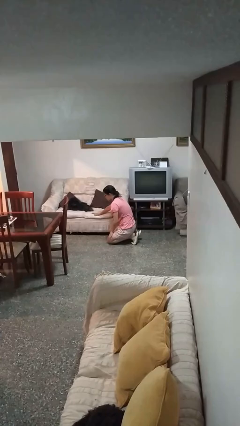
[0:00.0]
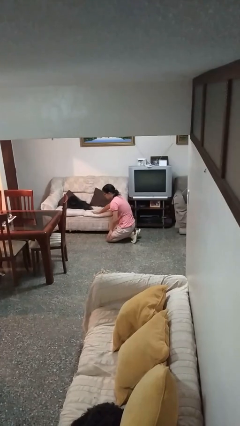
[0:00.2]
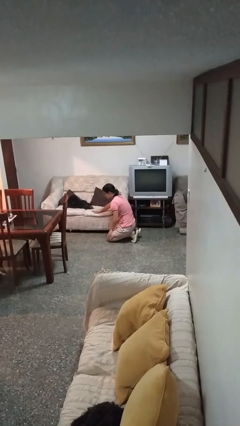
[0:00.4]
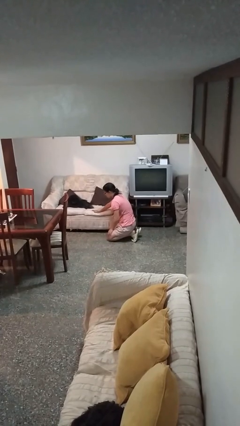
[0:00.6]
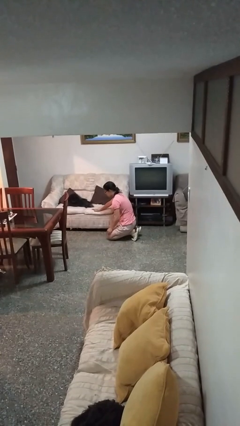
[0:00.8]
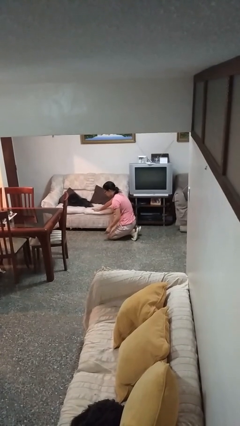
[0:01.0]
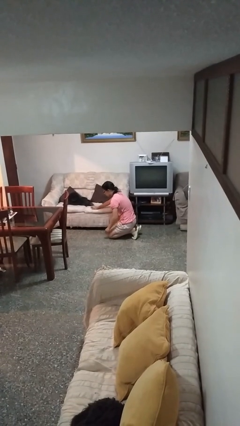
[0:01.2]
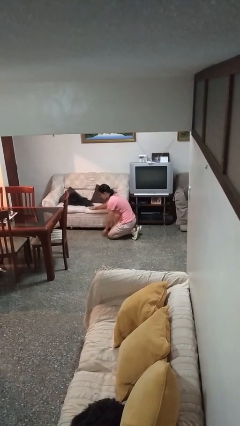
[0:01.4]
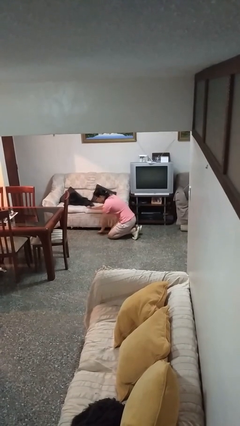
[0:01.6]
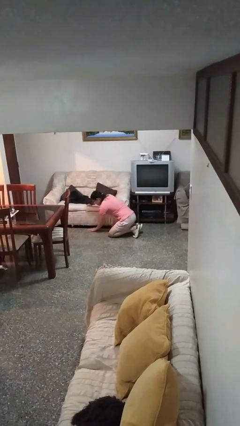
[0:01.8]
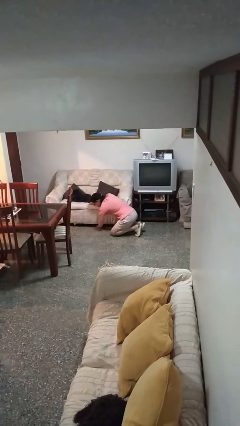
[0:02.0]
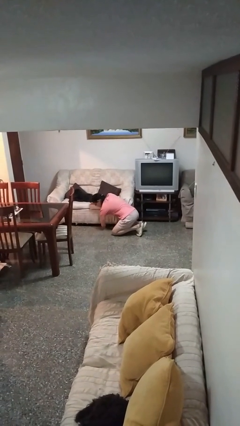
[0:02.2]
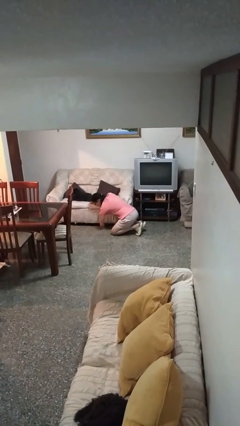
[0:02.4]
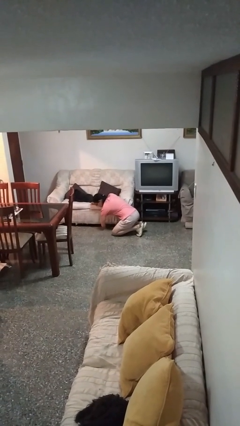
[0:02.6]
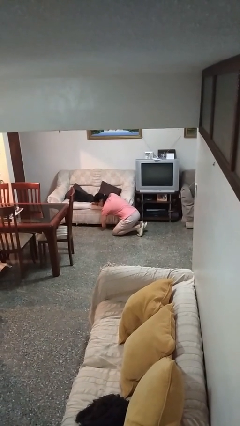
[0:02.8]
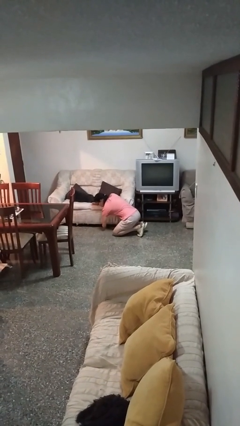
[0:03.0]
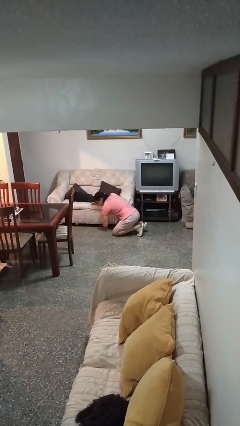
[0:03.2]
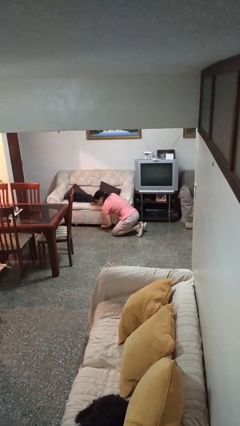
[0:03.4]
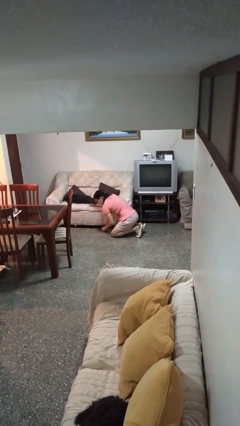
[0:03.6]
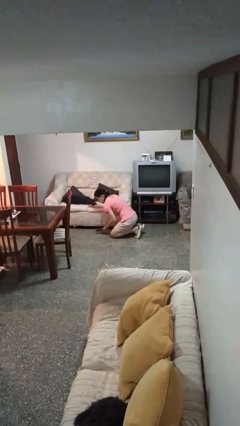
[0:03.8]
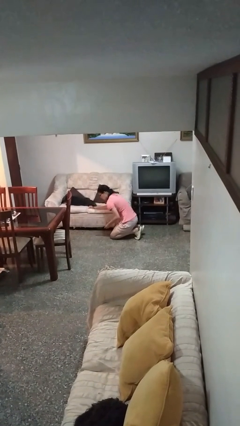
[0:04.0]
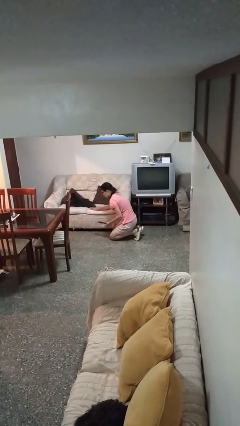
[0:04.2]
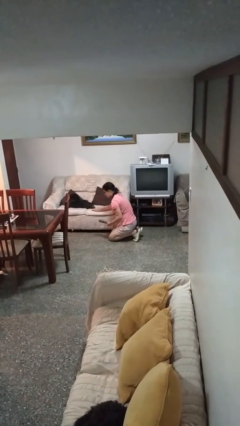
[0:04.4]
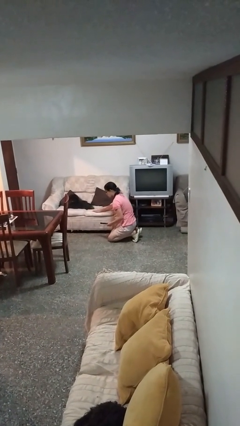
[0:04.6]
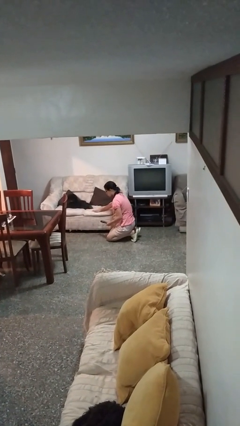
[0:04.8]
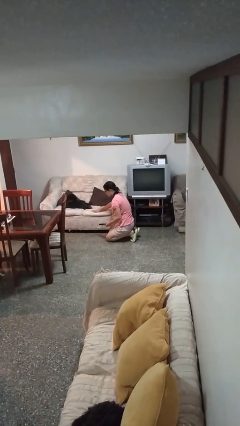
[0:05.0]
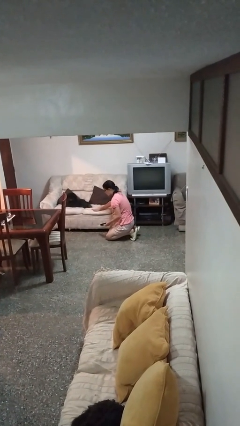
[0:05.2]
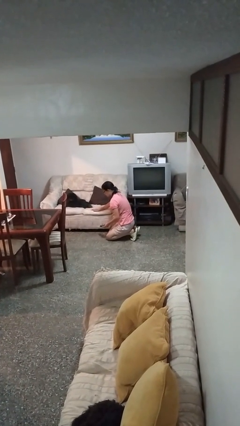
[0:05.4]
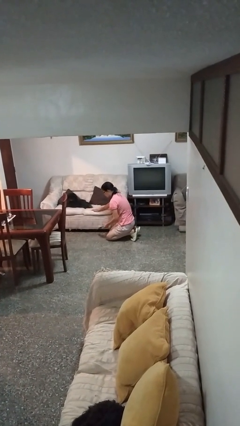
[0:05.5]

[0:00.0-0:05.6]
person searches under couch

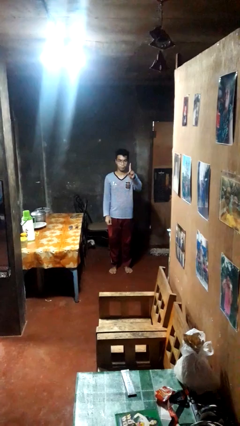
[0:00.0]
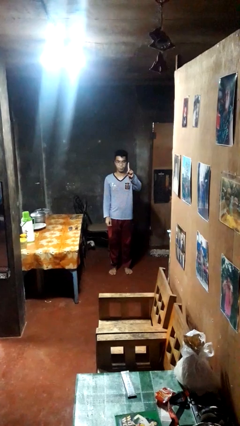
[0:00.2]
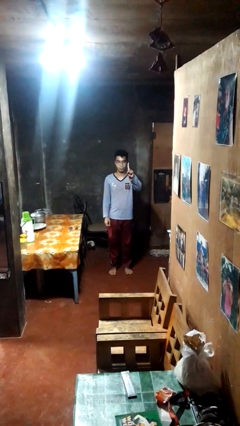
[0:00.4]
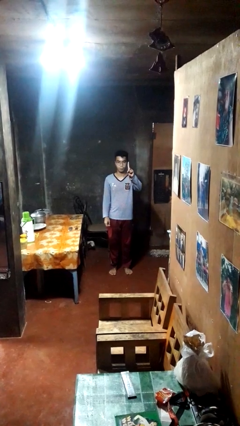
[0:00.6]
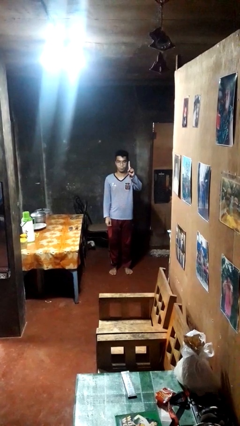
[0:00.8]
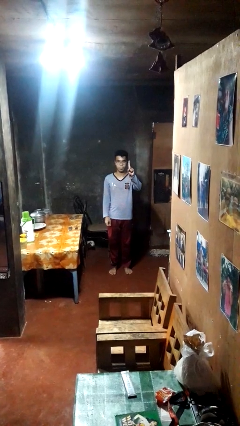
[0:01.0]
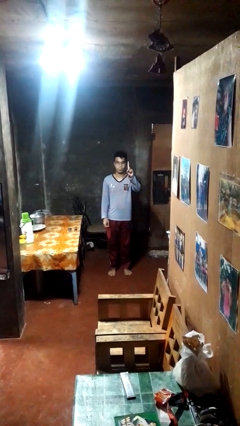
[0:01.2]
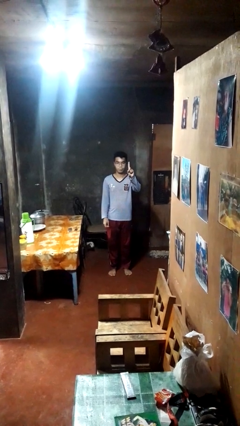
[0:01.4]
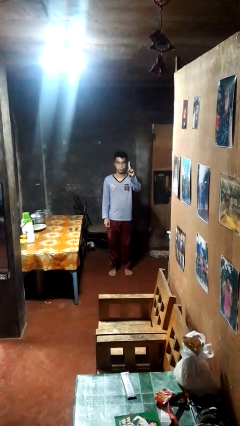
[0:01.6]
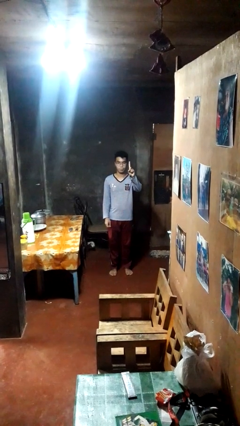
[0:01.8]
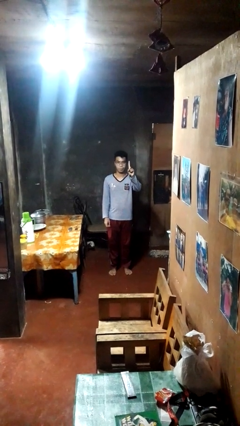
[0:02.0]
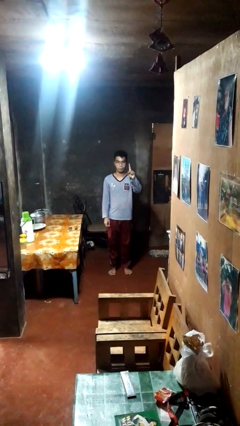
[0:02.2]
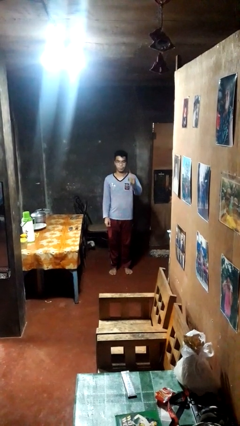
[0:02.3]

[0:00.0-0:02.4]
person gestures number one

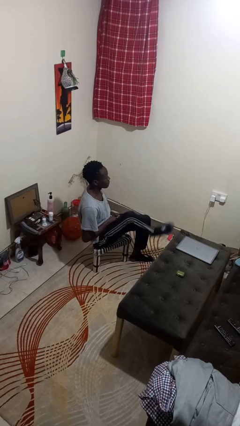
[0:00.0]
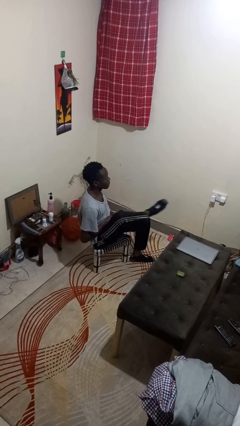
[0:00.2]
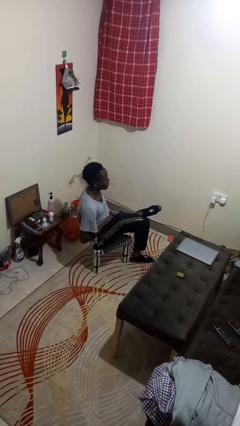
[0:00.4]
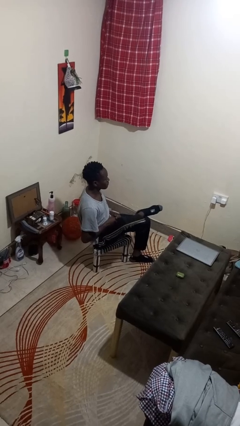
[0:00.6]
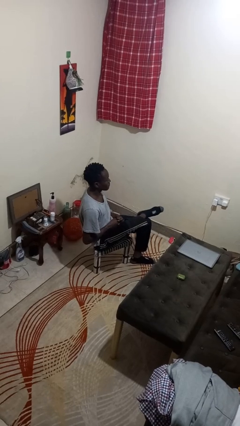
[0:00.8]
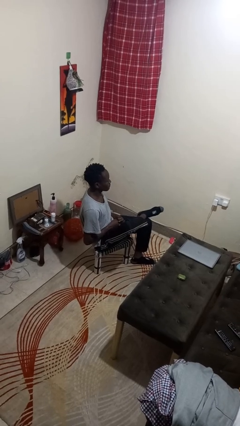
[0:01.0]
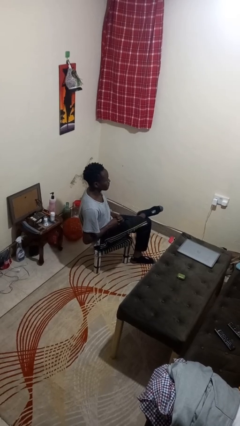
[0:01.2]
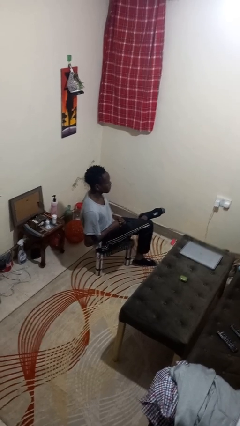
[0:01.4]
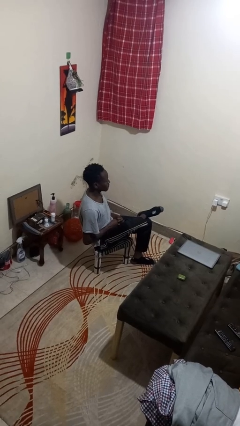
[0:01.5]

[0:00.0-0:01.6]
person crosses legs

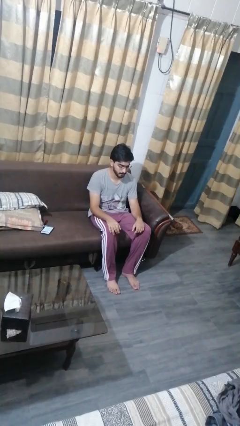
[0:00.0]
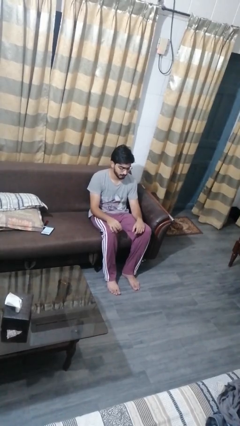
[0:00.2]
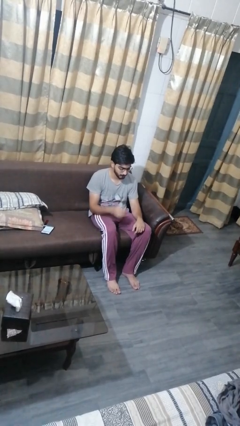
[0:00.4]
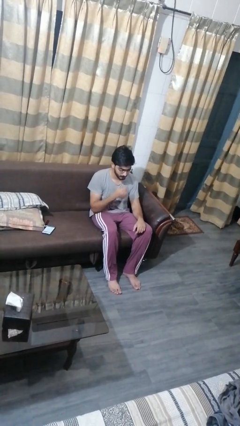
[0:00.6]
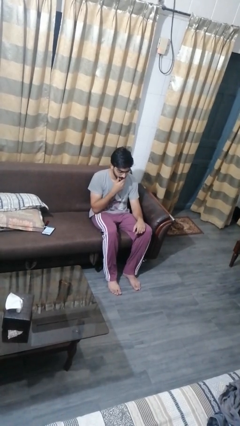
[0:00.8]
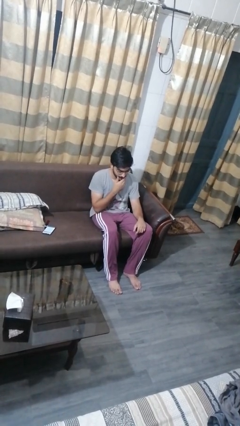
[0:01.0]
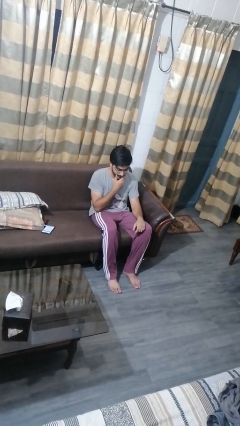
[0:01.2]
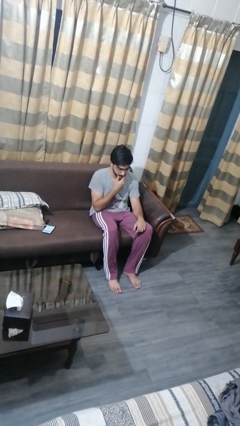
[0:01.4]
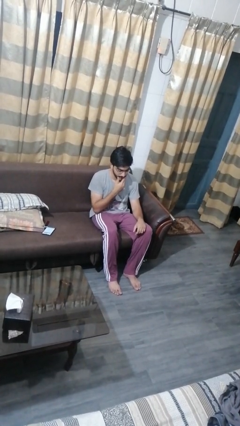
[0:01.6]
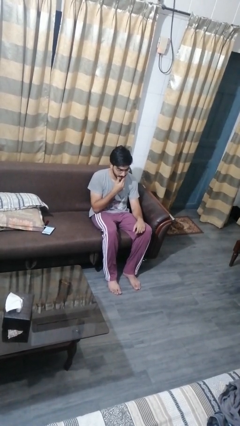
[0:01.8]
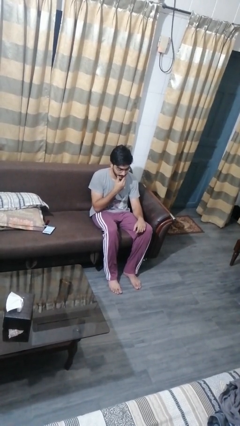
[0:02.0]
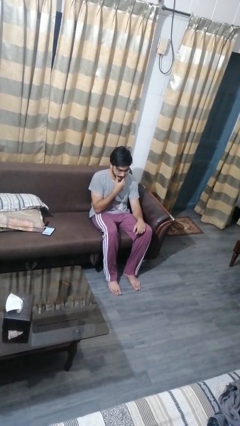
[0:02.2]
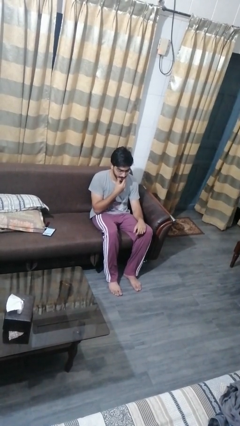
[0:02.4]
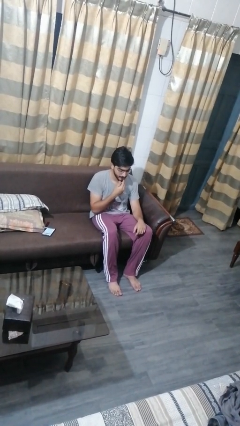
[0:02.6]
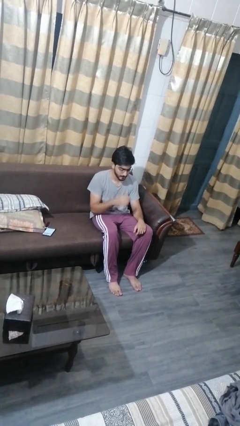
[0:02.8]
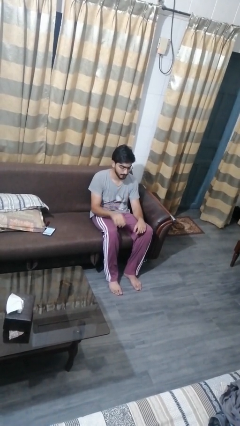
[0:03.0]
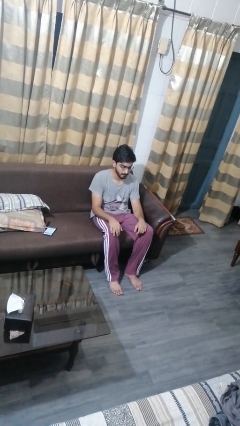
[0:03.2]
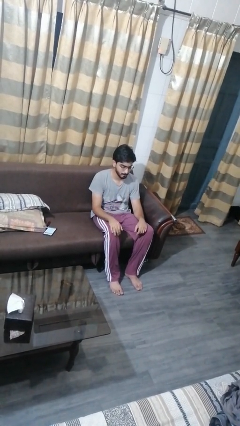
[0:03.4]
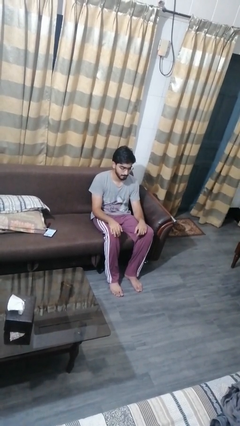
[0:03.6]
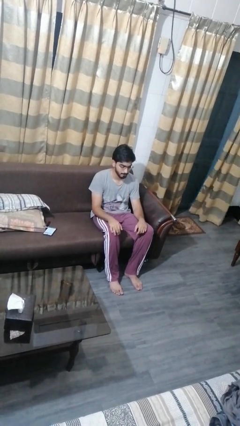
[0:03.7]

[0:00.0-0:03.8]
person strokes chin

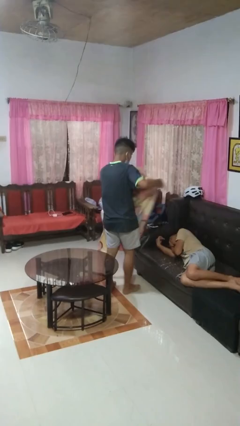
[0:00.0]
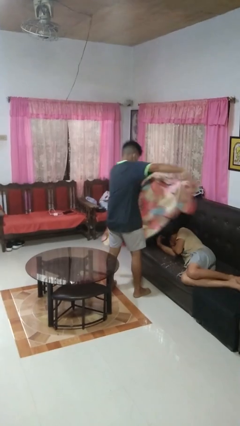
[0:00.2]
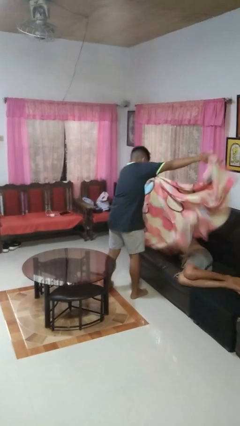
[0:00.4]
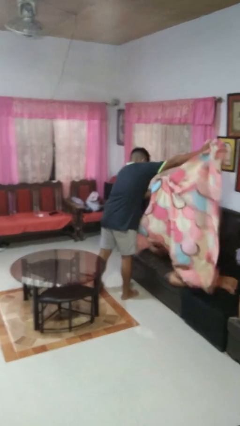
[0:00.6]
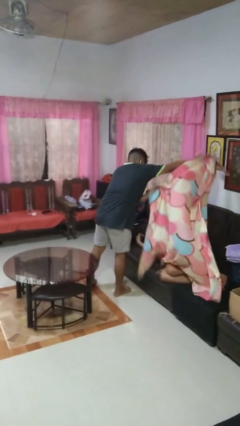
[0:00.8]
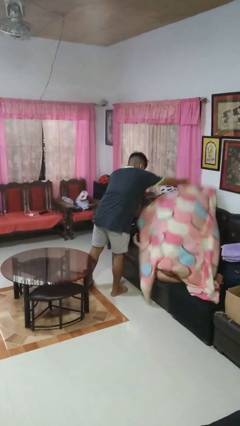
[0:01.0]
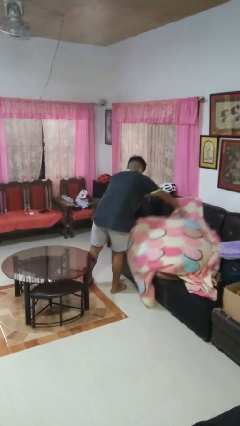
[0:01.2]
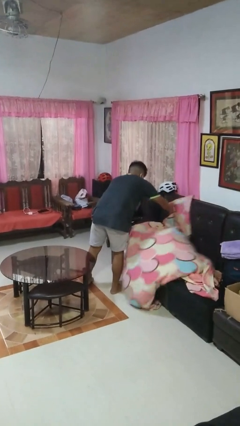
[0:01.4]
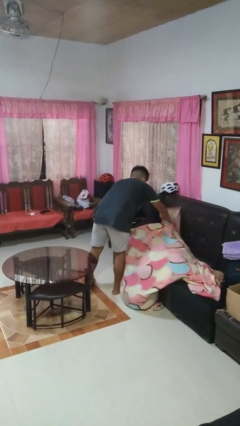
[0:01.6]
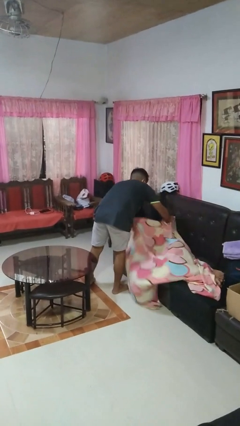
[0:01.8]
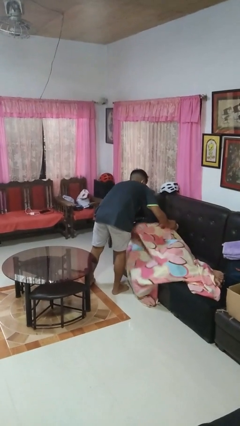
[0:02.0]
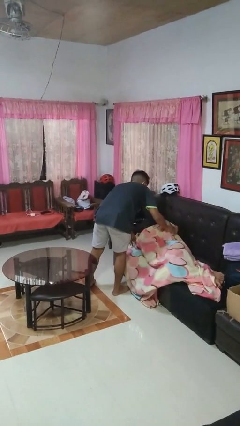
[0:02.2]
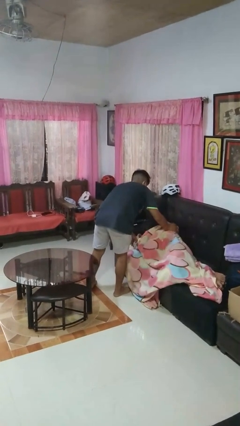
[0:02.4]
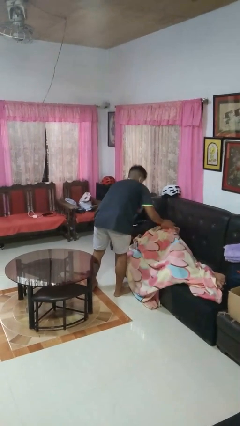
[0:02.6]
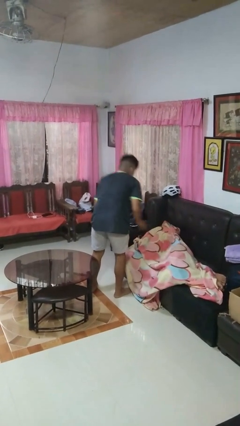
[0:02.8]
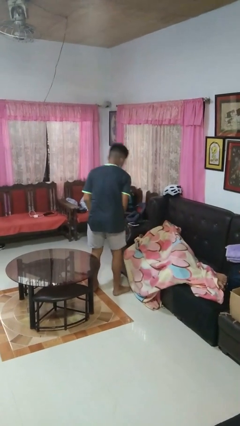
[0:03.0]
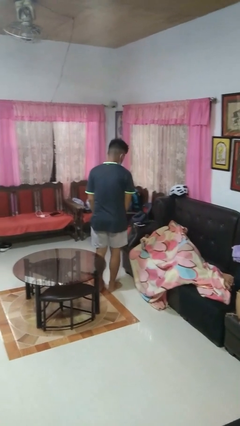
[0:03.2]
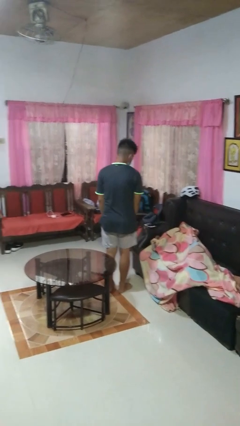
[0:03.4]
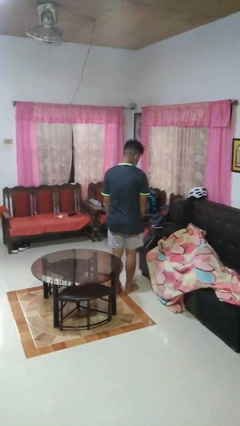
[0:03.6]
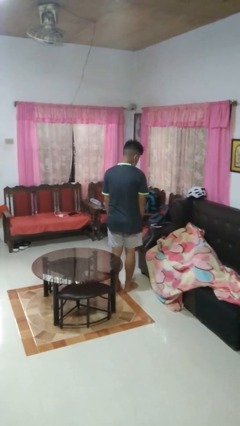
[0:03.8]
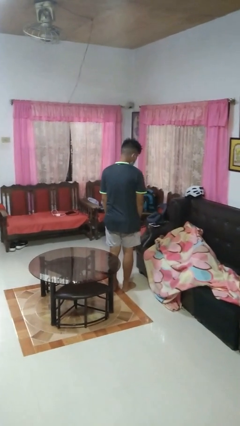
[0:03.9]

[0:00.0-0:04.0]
person covers friend with blanket

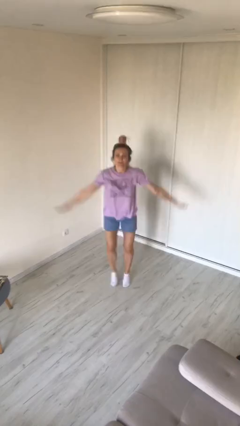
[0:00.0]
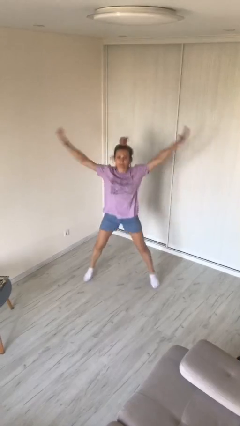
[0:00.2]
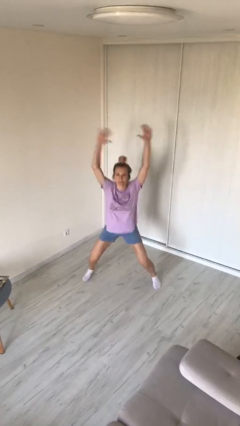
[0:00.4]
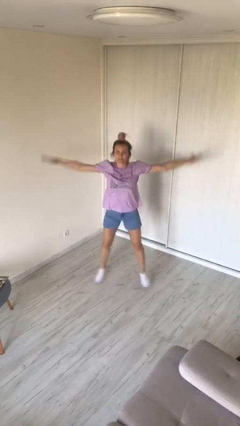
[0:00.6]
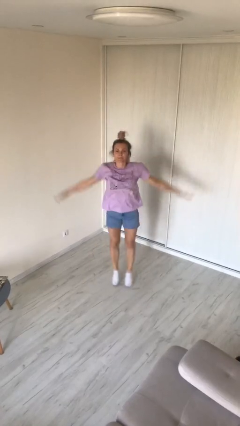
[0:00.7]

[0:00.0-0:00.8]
person exercises with jumping jacks
